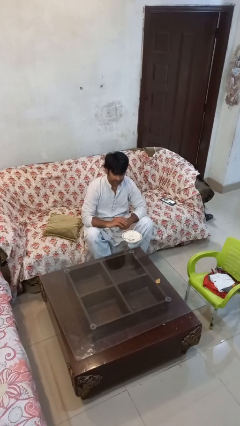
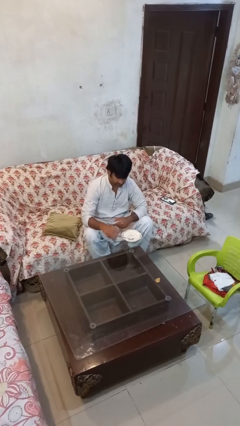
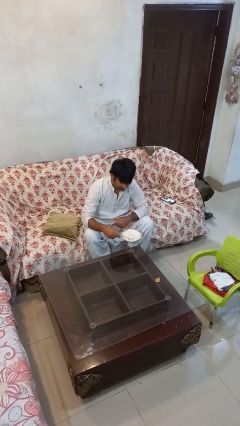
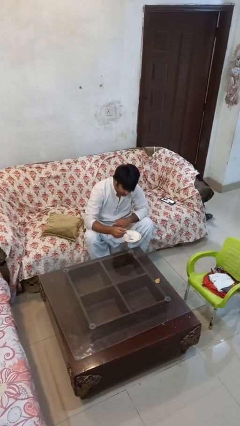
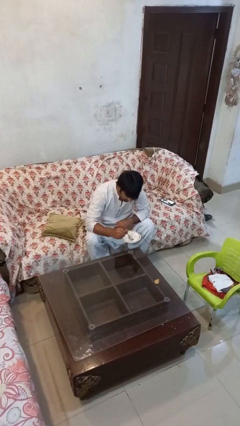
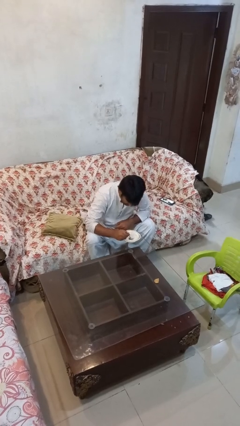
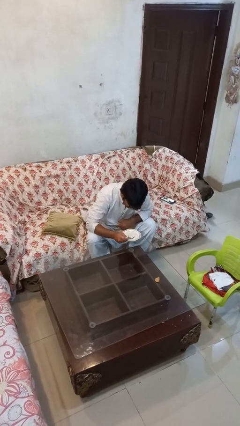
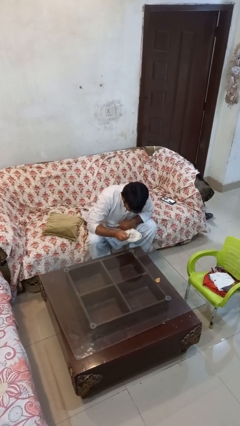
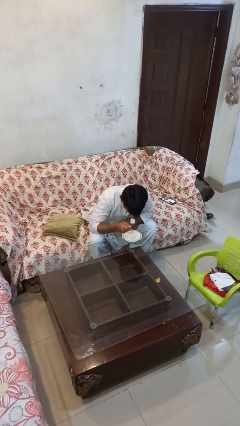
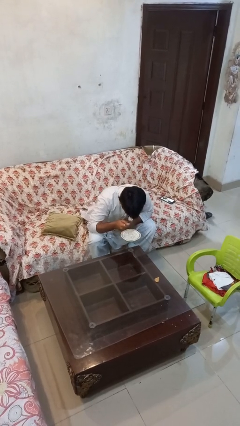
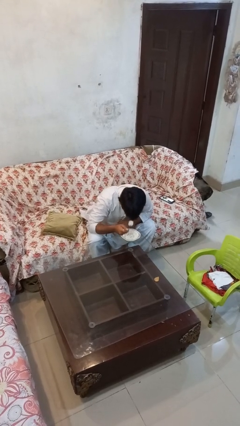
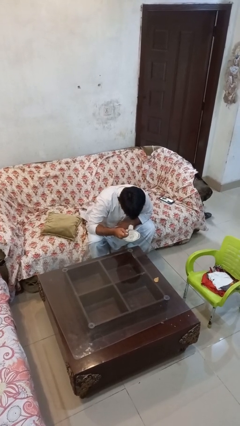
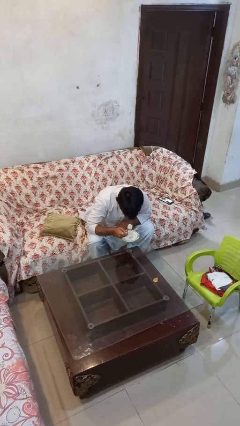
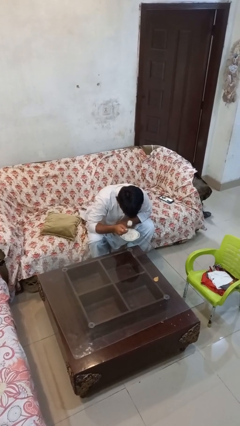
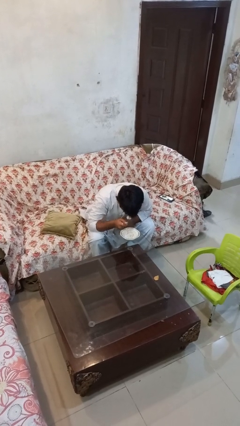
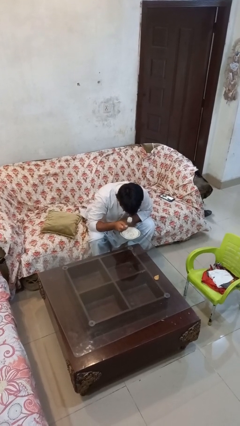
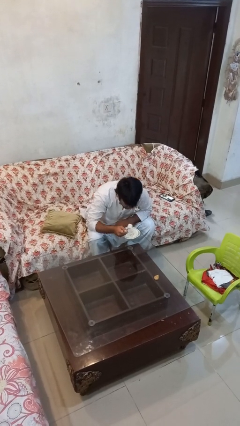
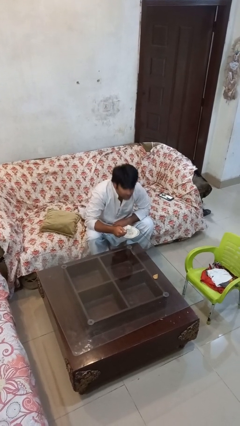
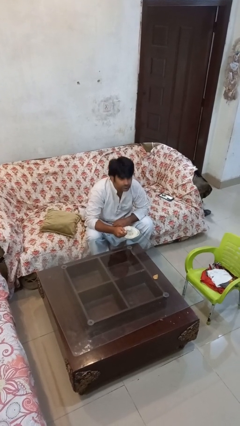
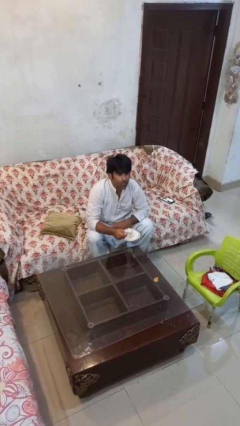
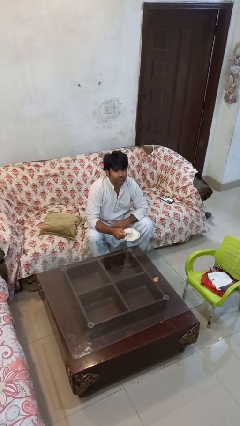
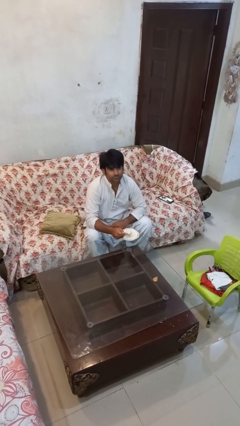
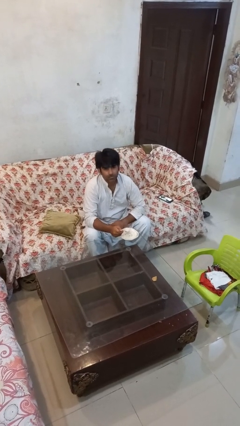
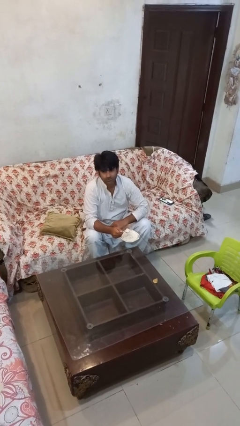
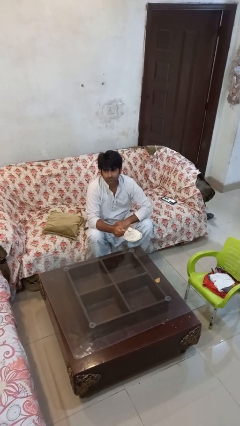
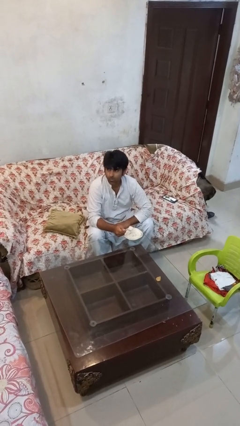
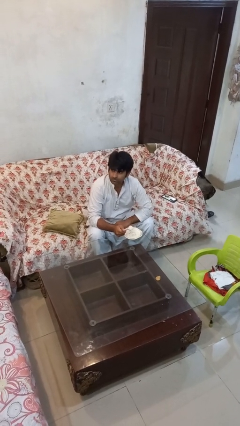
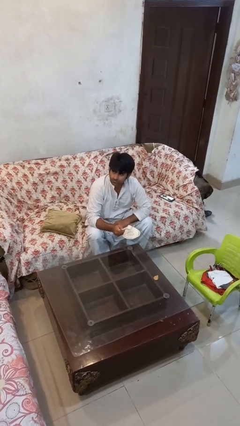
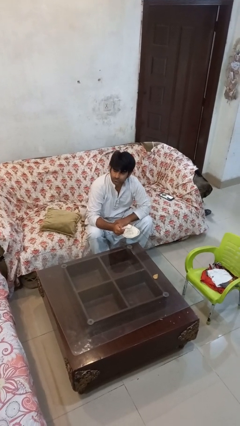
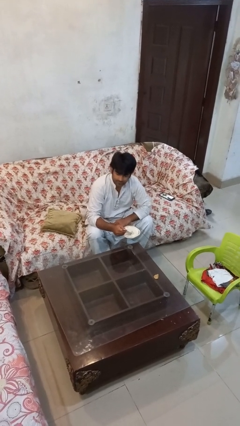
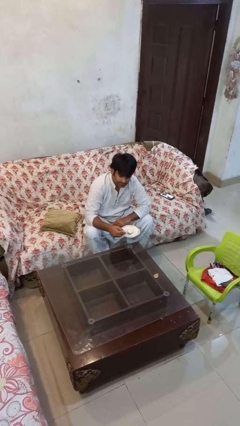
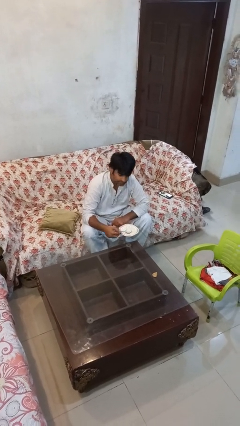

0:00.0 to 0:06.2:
person eats with utensil

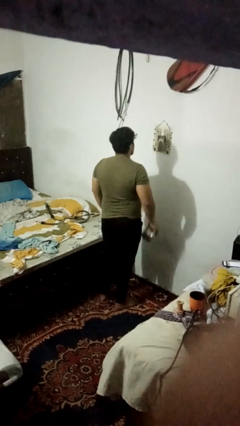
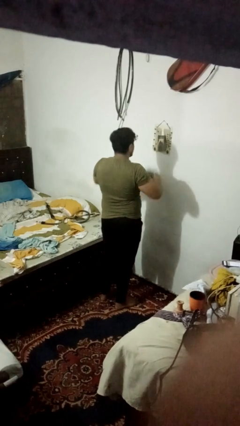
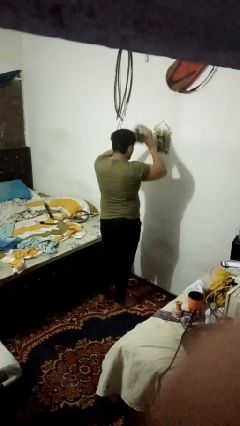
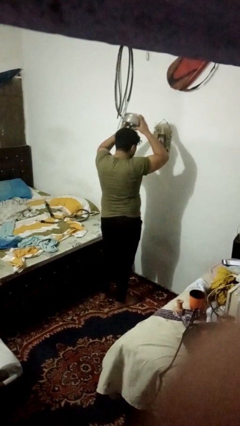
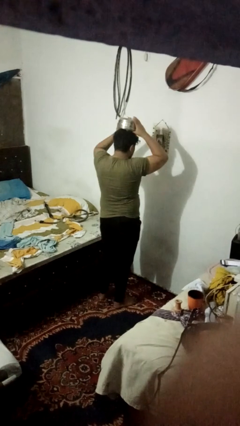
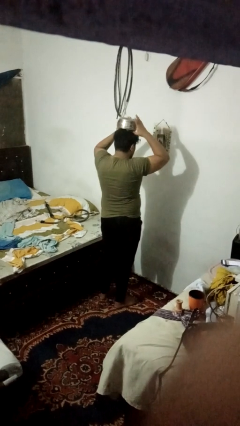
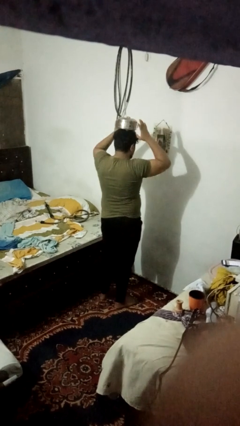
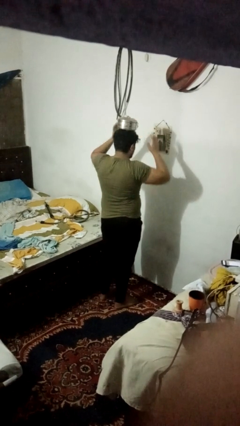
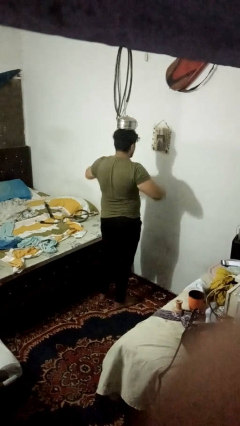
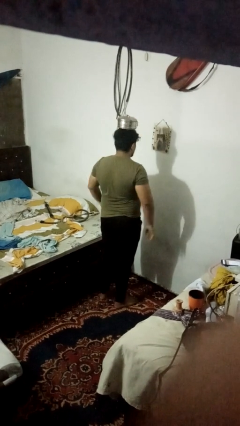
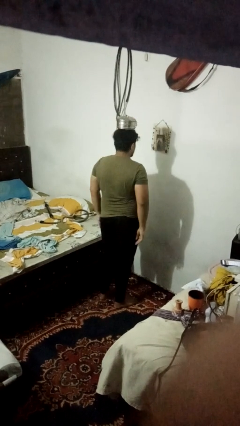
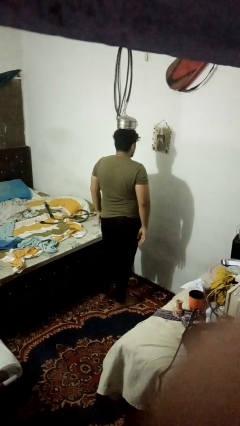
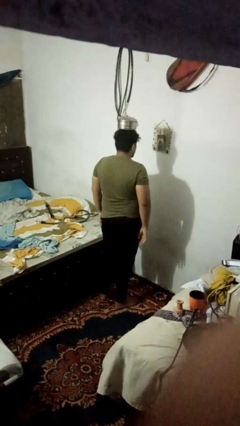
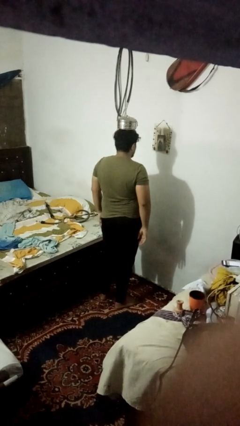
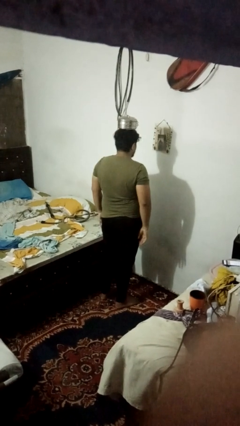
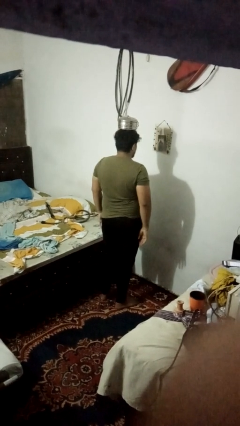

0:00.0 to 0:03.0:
person holds object above head

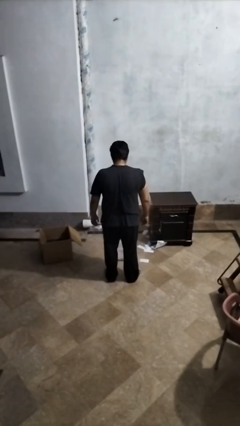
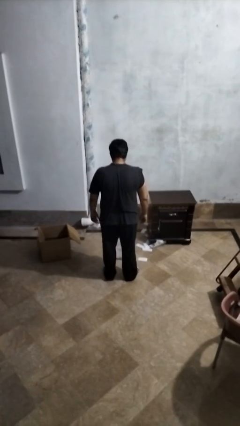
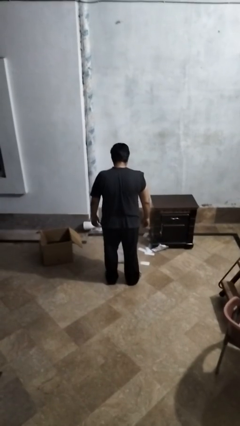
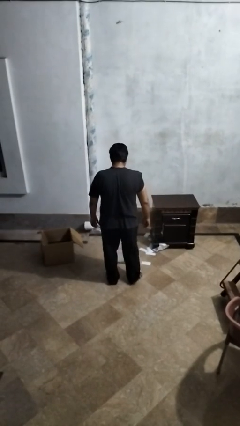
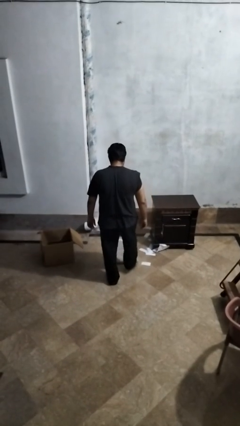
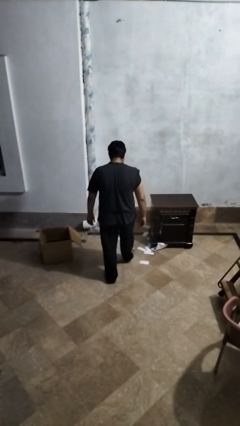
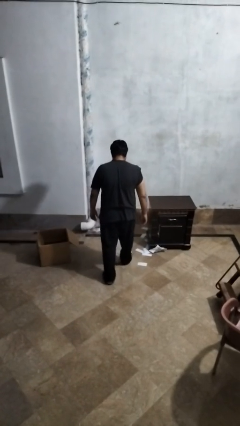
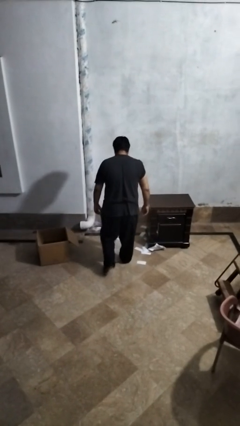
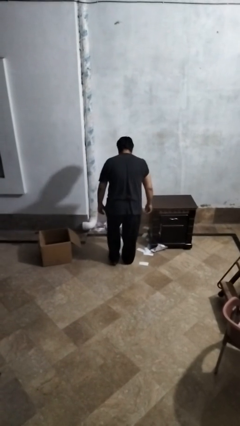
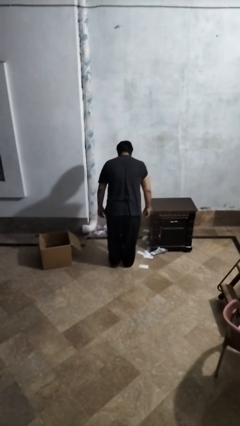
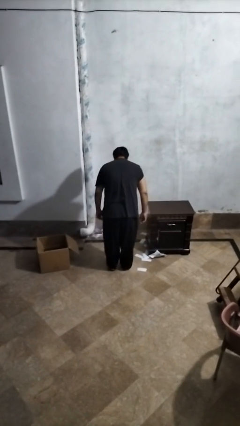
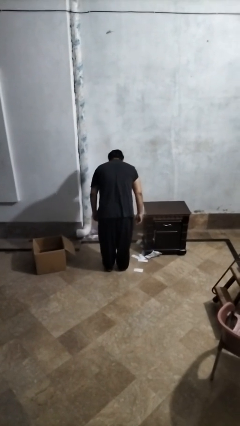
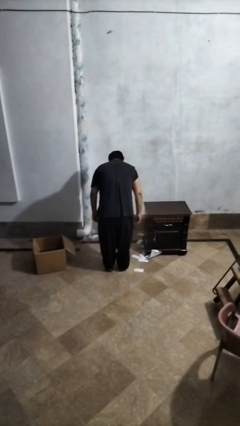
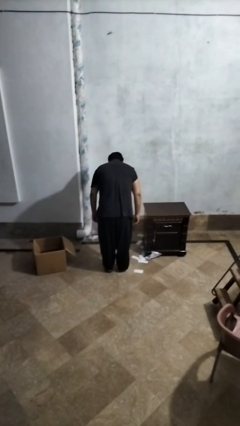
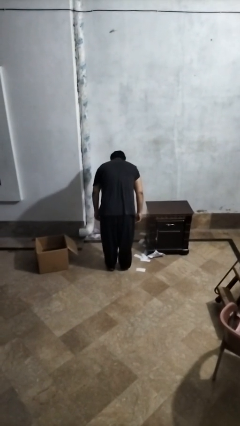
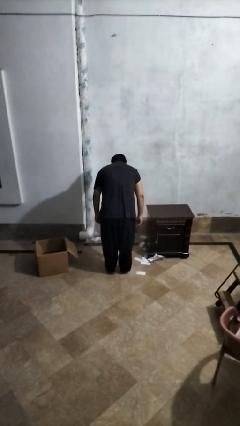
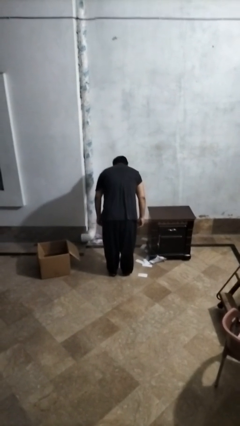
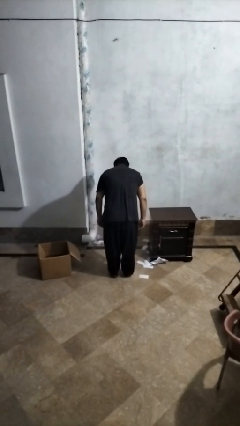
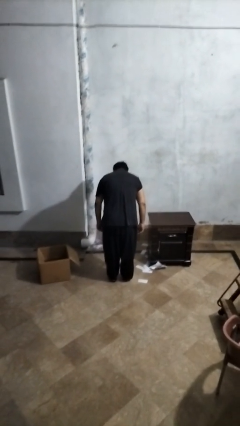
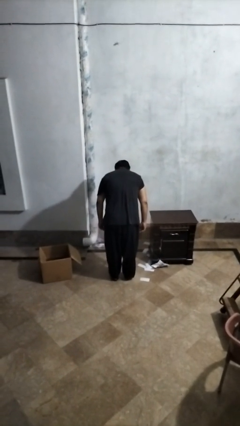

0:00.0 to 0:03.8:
person uses bodyweight scale

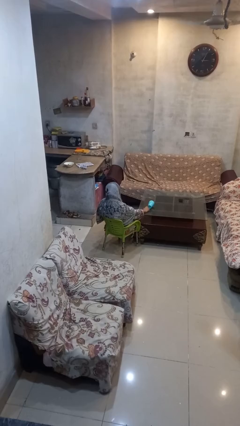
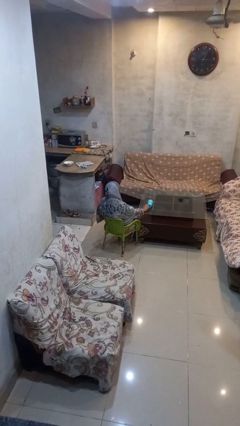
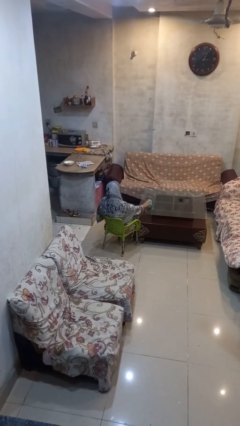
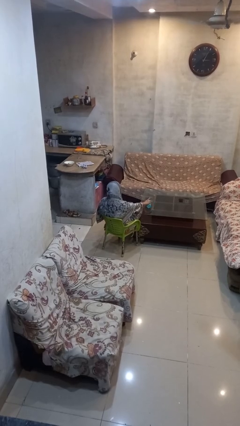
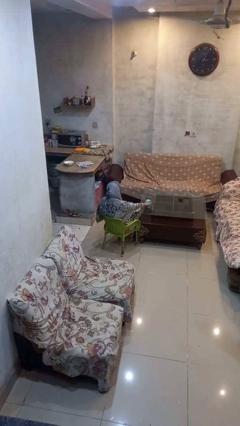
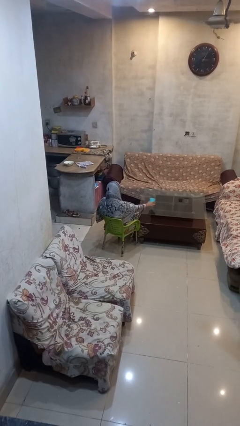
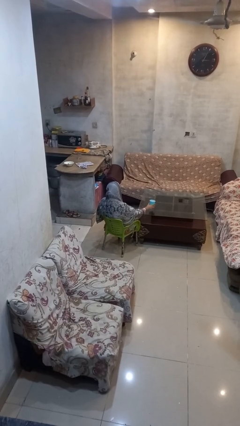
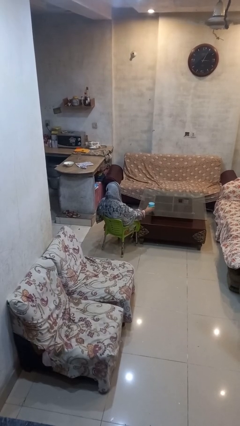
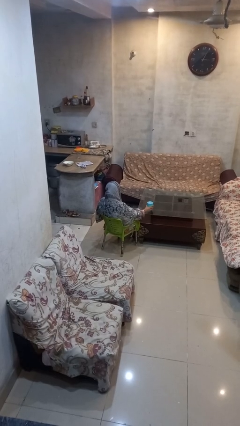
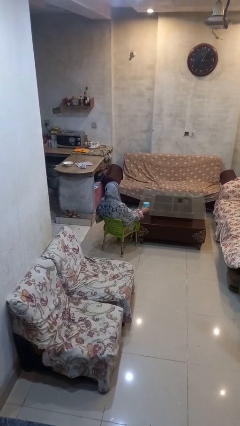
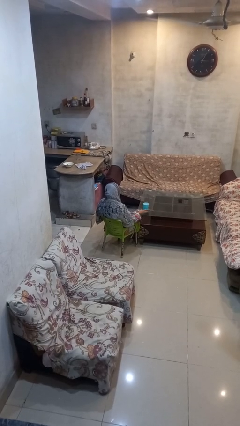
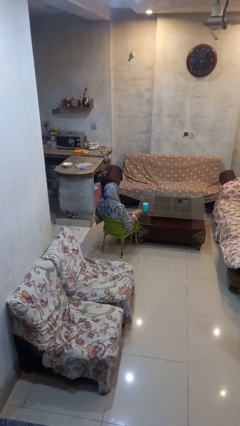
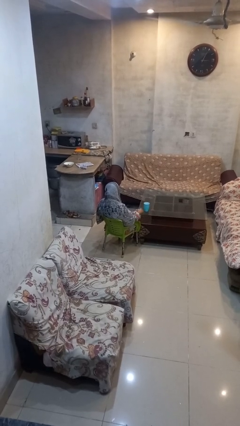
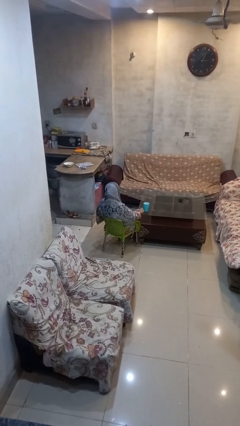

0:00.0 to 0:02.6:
person sets upright glass

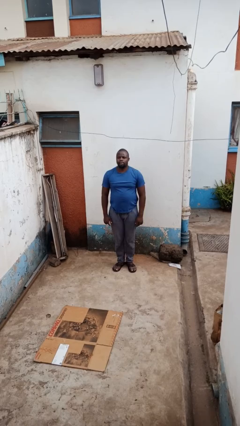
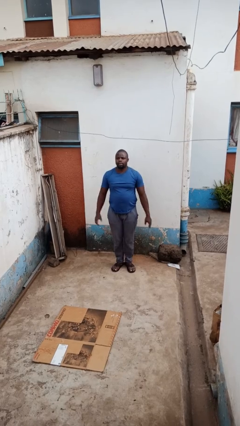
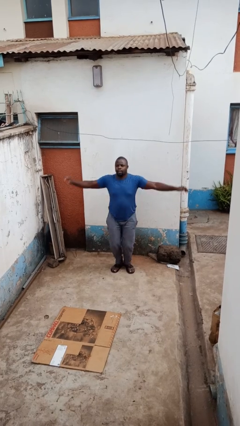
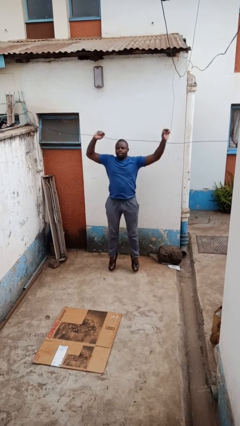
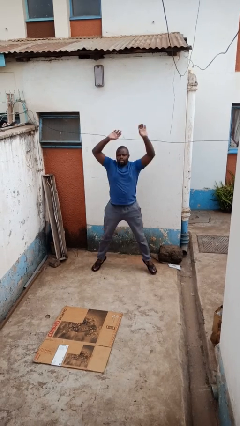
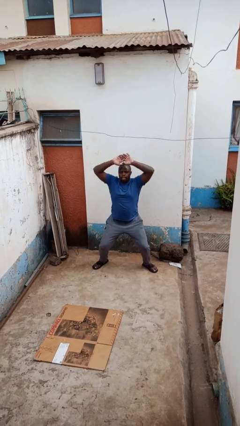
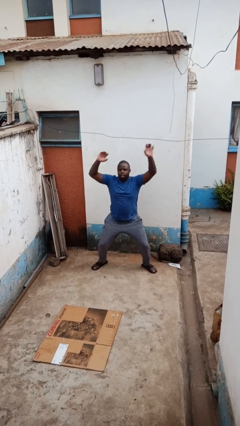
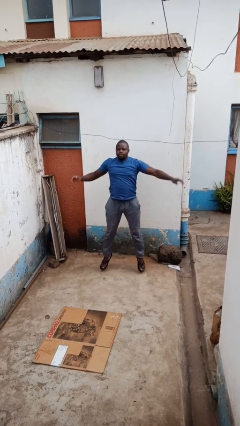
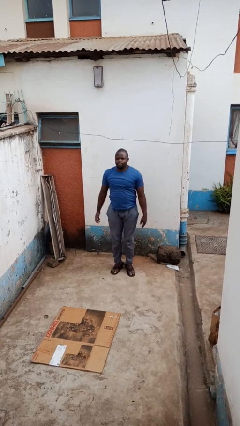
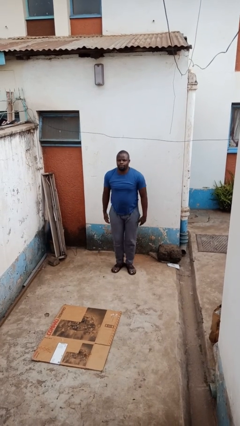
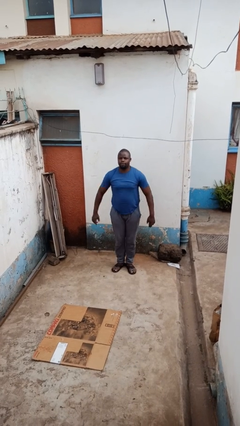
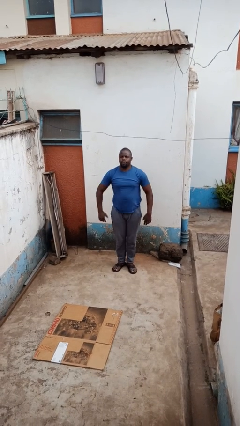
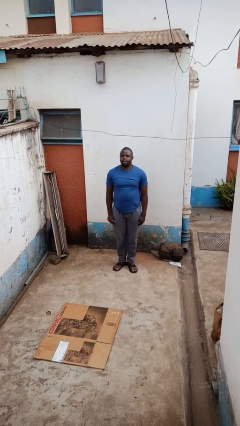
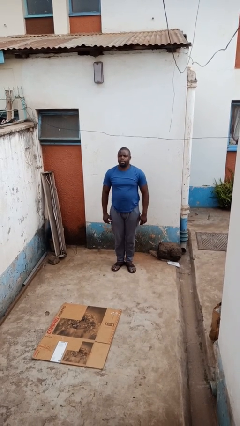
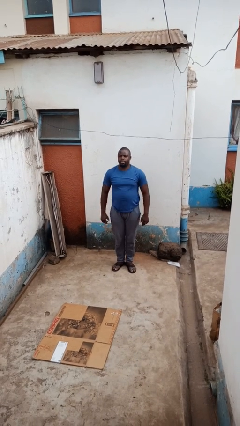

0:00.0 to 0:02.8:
person exercises with jumping jacks
